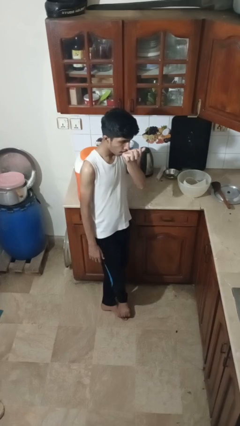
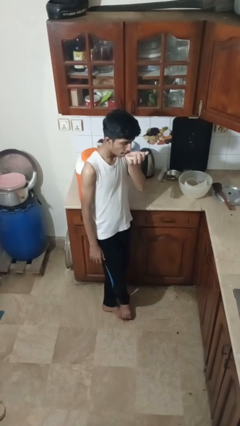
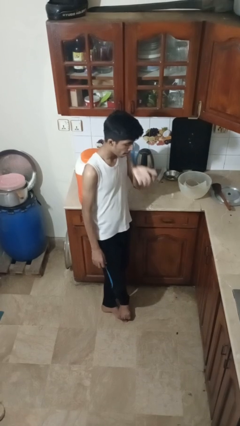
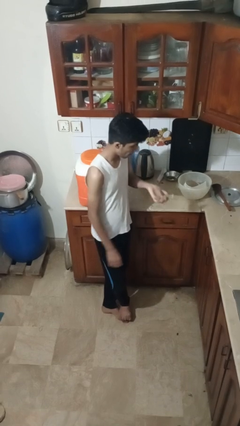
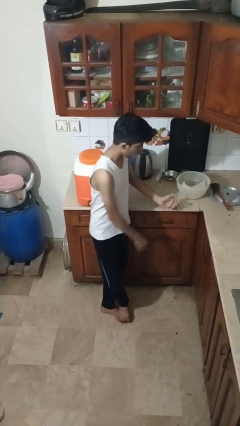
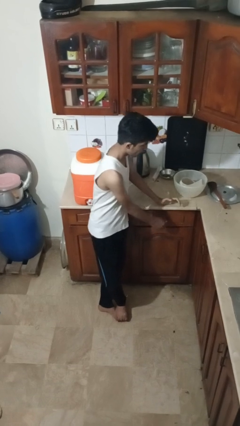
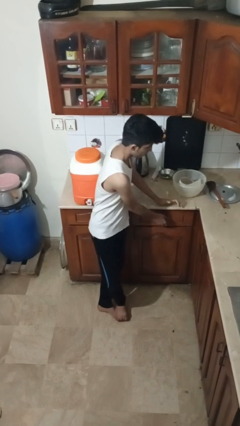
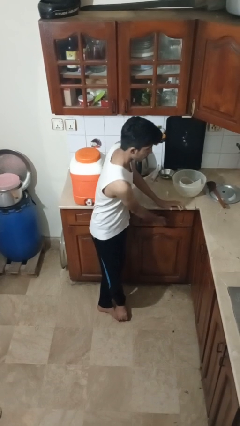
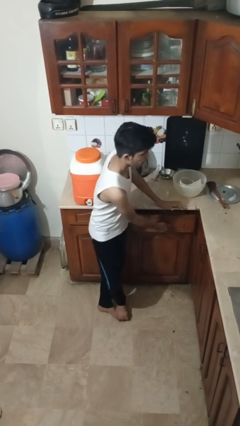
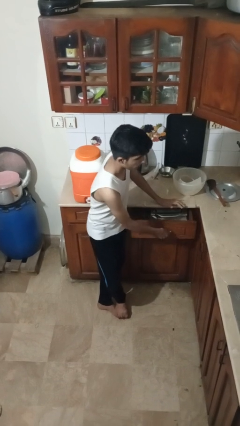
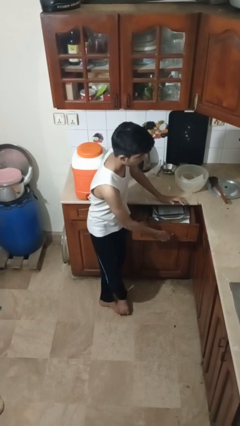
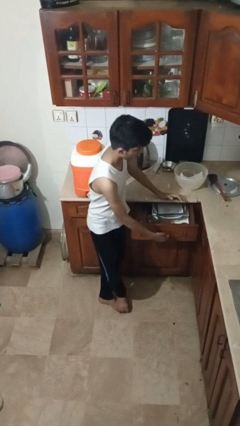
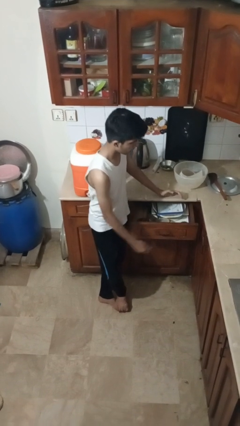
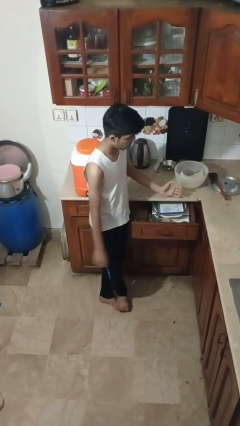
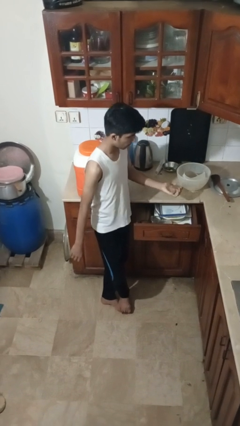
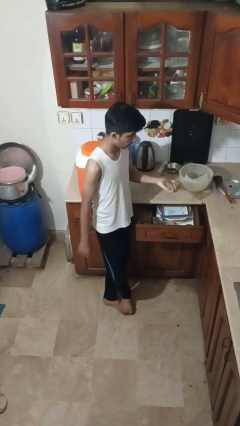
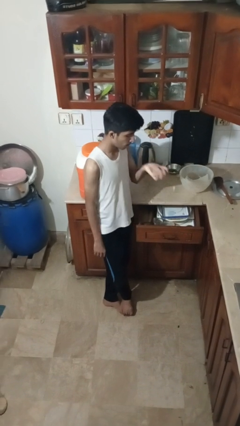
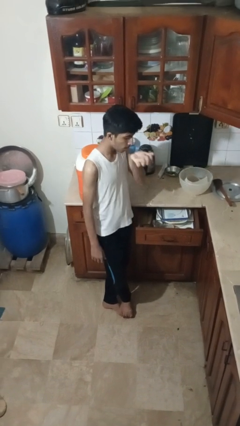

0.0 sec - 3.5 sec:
person opens kitchen drawer

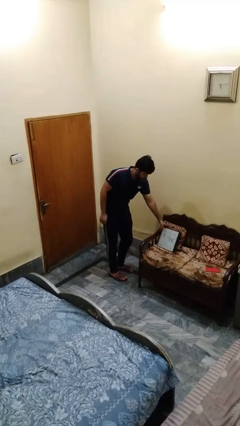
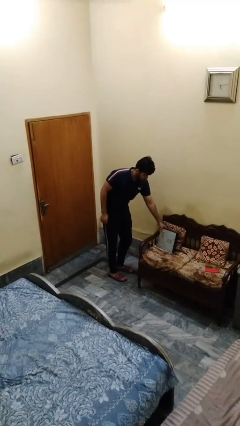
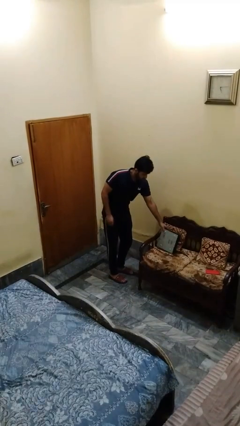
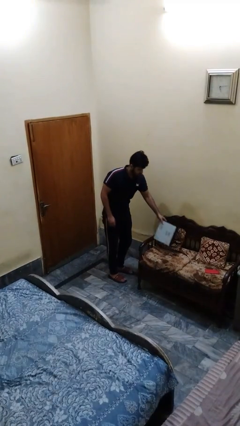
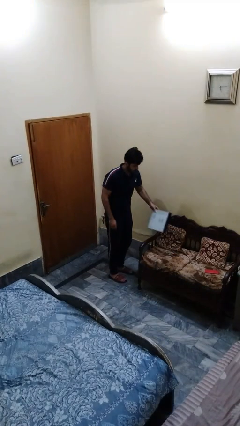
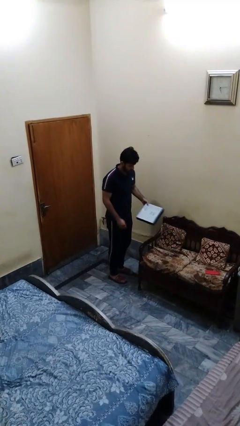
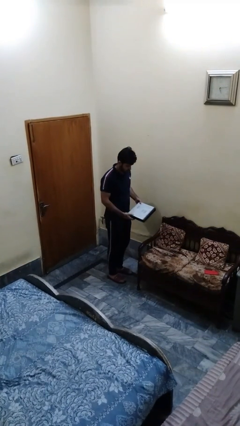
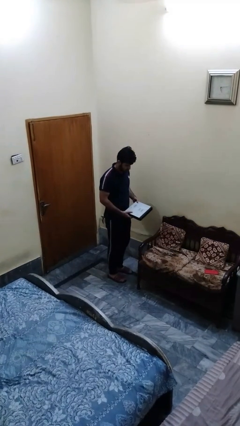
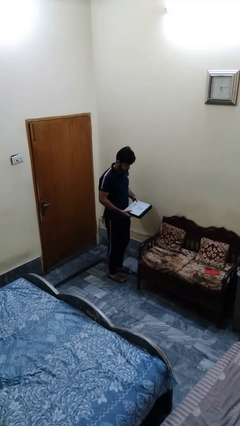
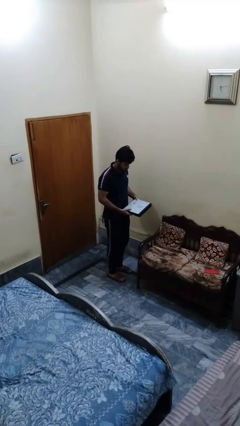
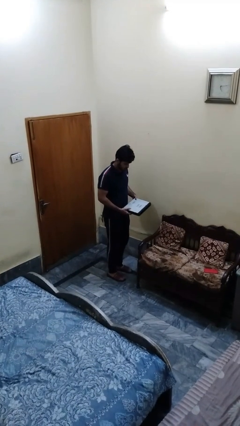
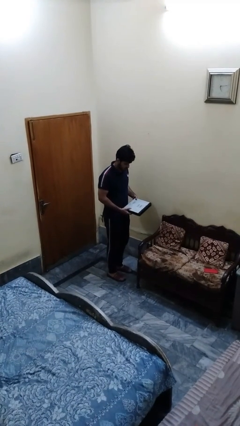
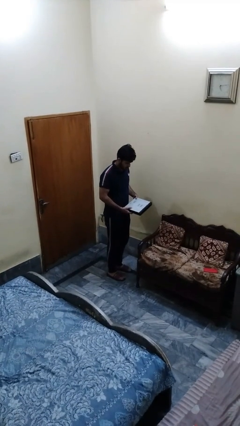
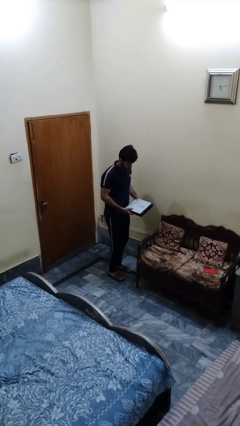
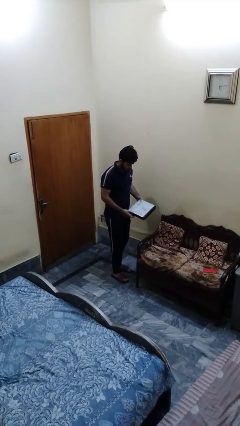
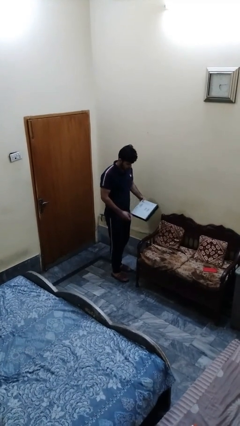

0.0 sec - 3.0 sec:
person picks up object from couch

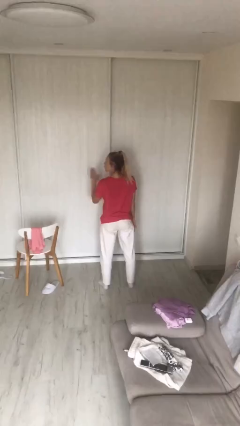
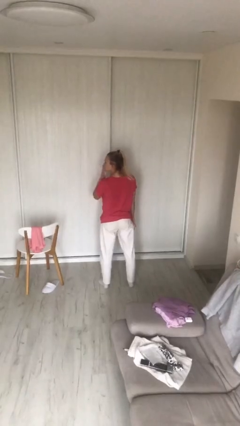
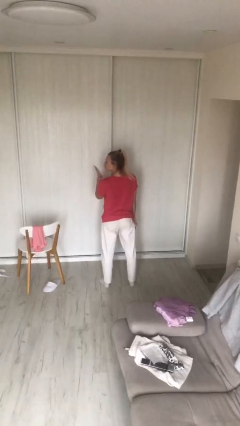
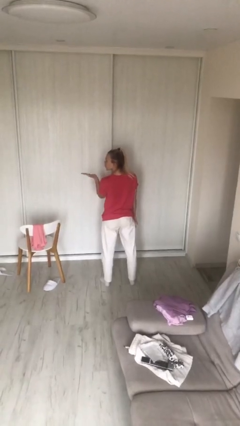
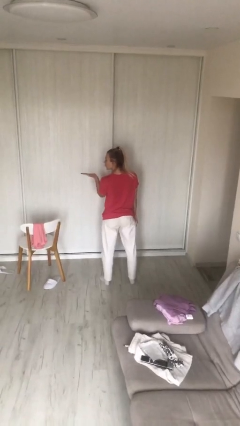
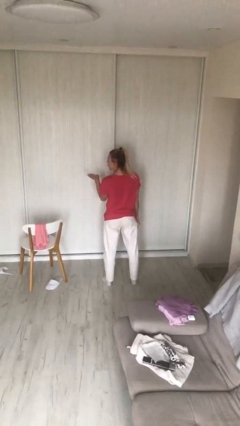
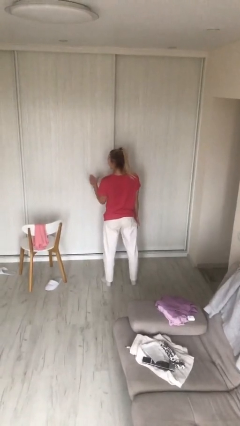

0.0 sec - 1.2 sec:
person gestures blow kiss

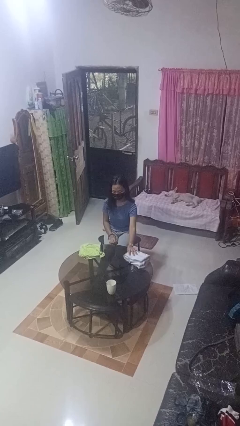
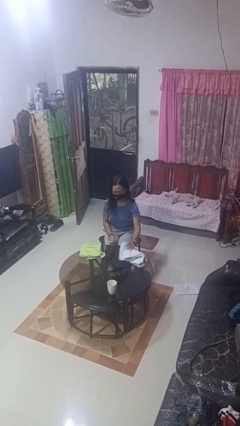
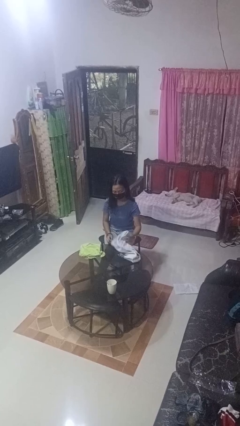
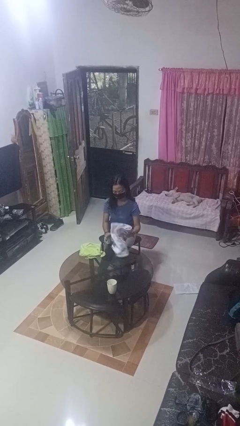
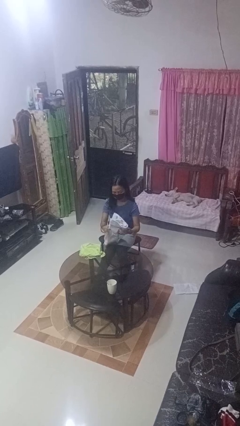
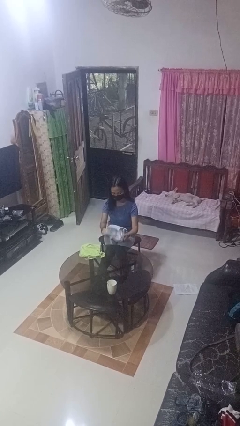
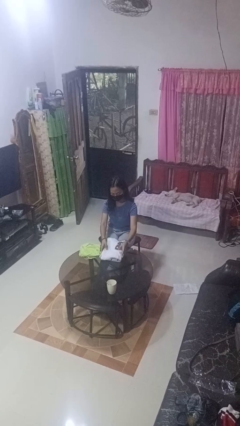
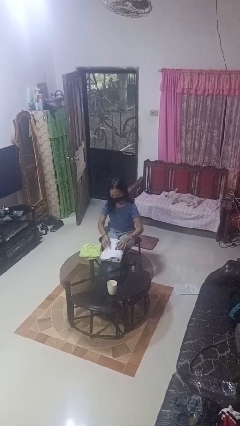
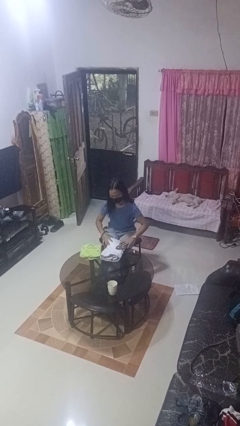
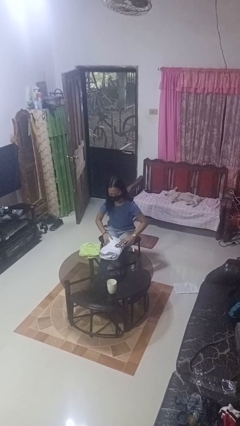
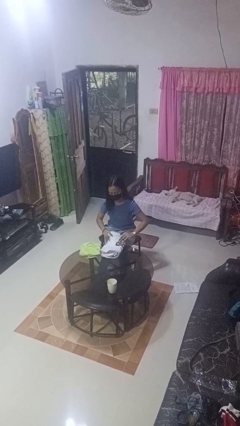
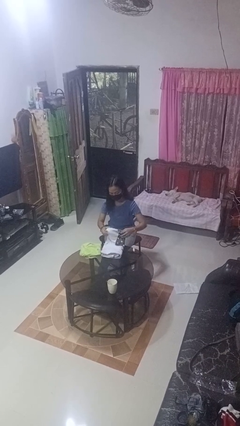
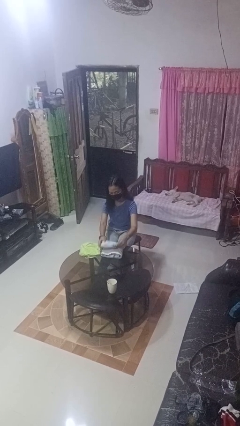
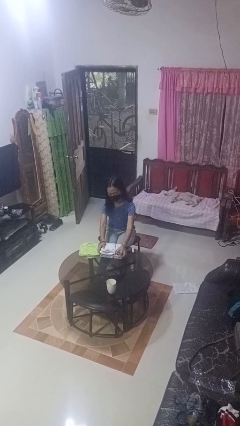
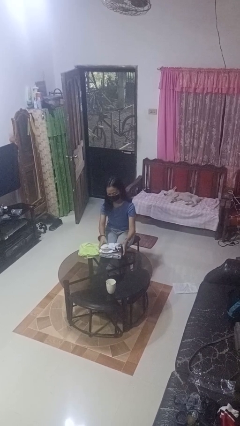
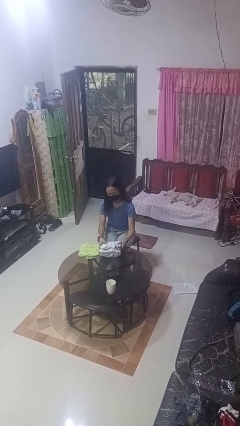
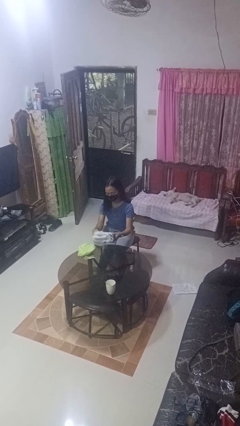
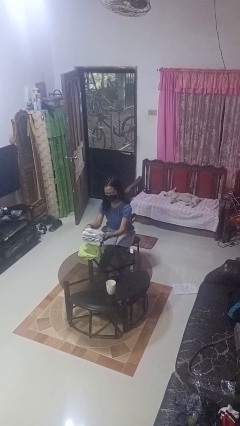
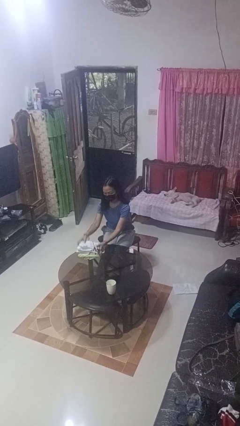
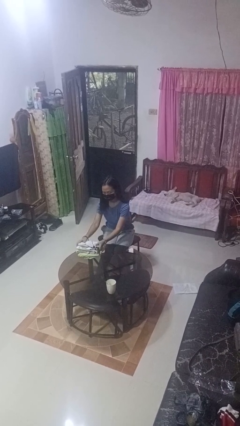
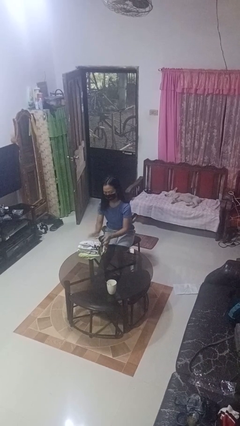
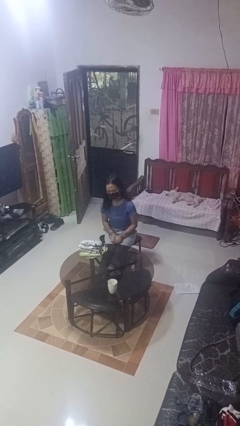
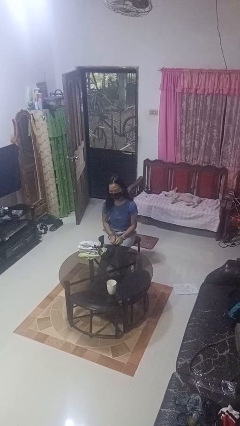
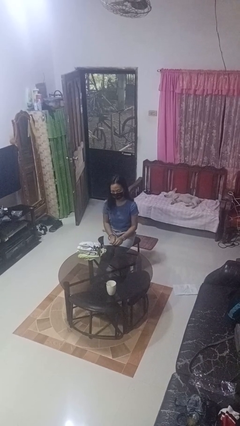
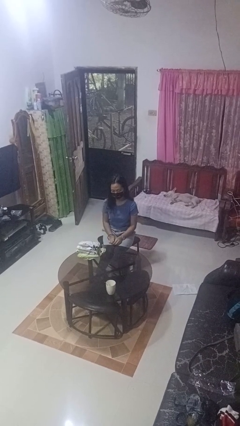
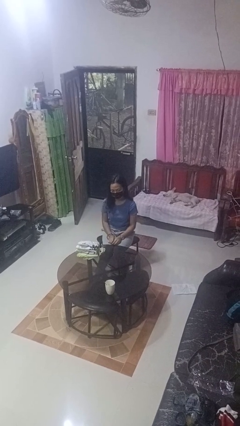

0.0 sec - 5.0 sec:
person folds towel

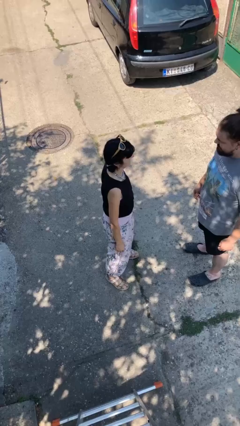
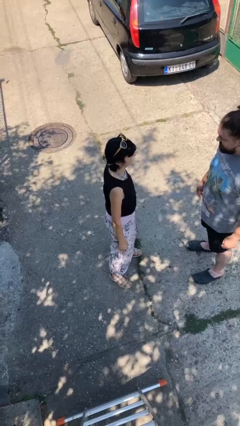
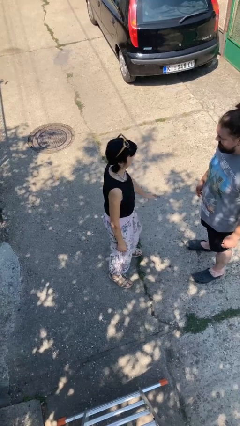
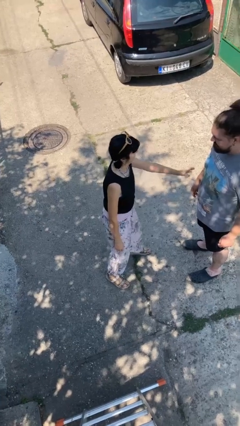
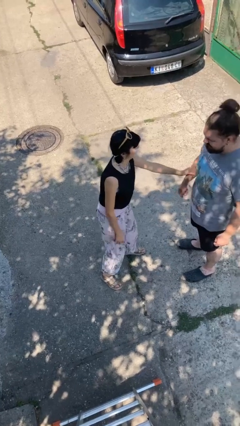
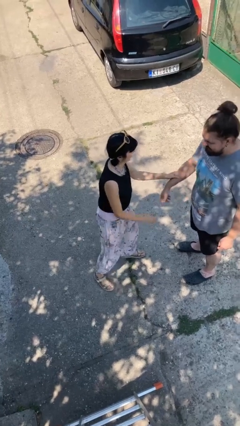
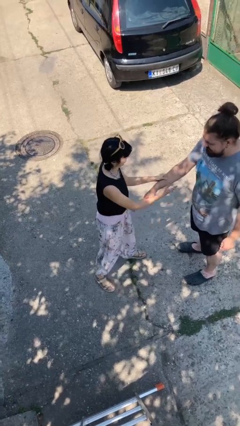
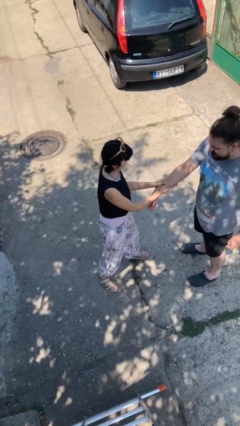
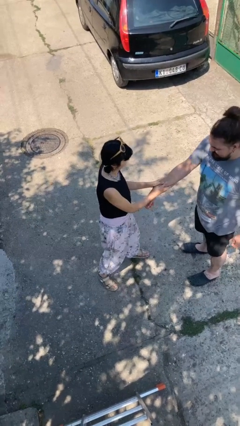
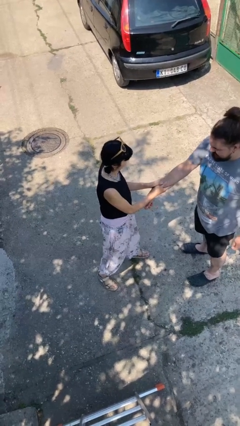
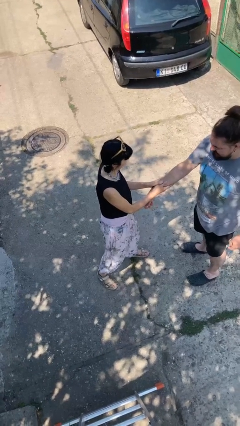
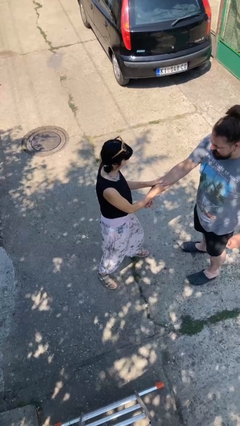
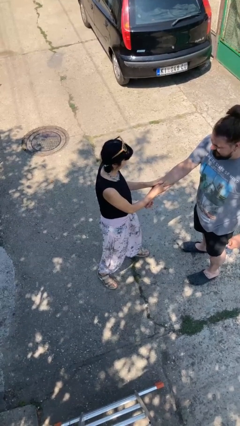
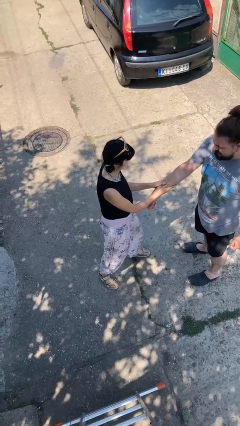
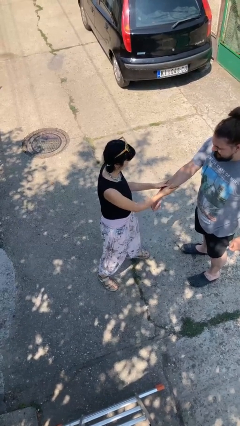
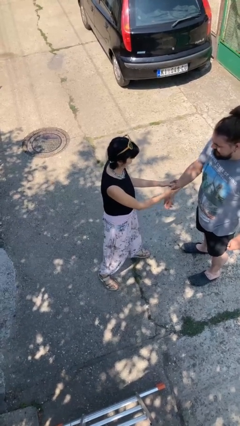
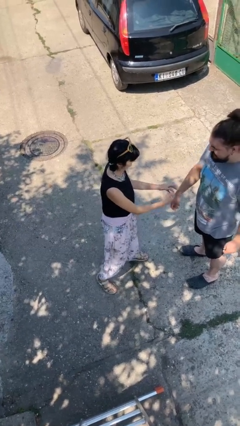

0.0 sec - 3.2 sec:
person grabs person by forearm

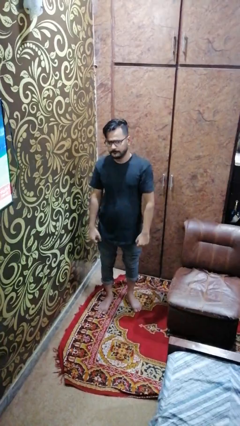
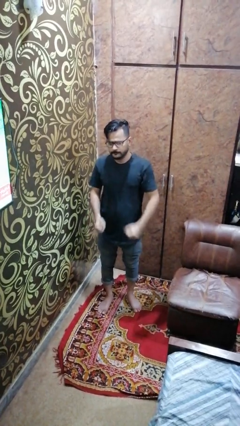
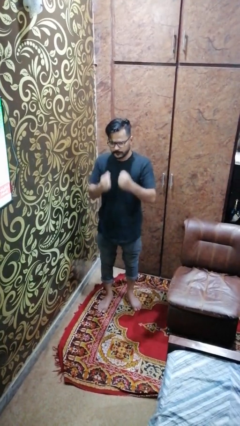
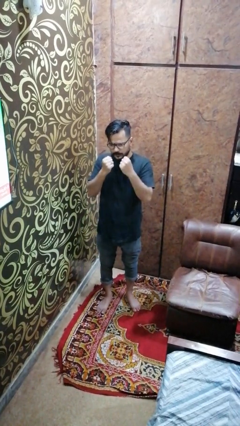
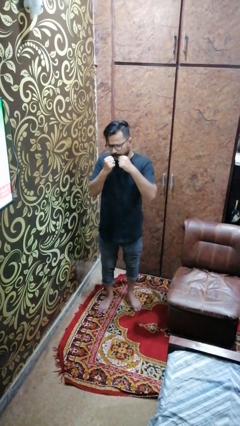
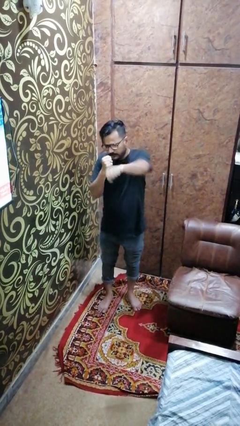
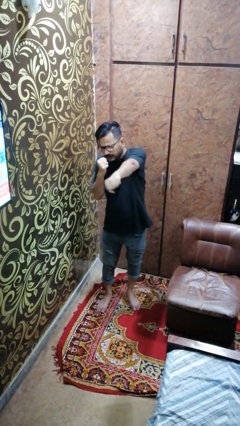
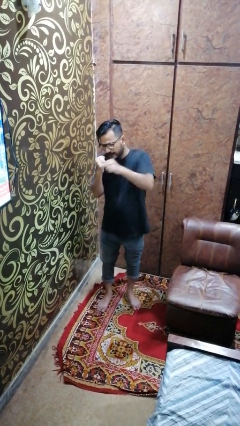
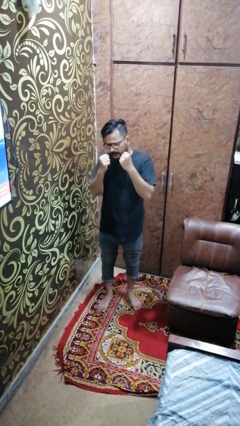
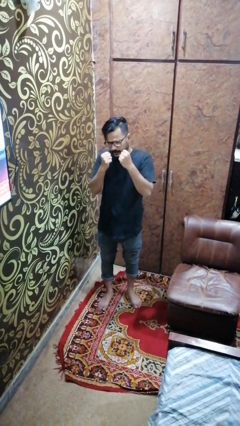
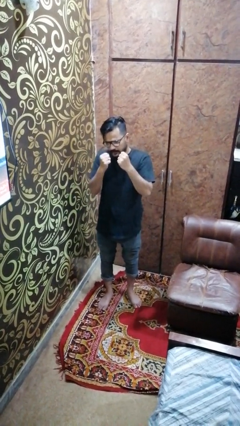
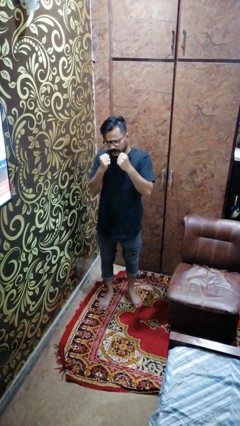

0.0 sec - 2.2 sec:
person punches
